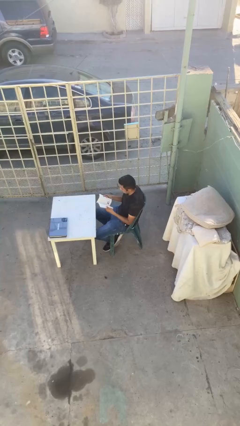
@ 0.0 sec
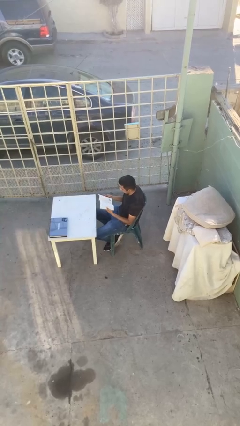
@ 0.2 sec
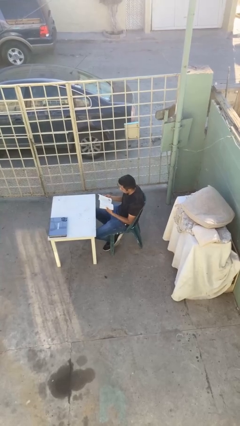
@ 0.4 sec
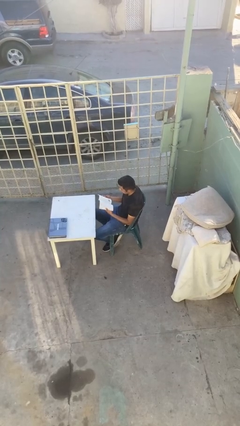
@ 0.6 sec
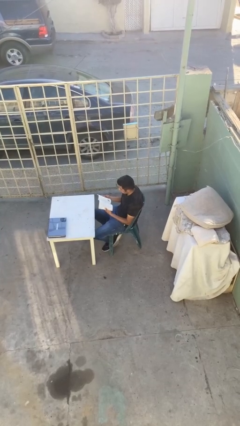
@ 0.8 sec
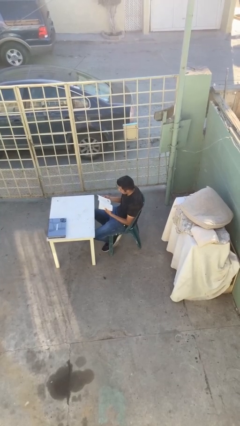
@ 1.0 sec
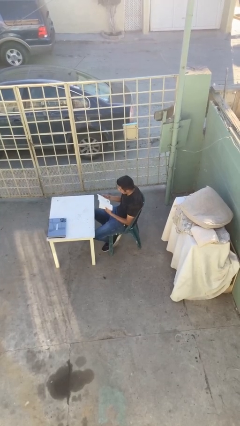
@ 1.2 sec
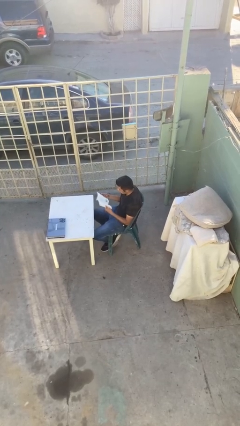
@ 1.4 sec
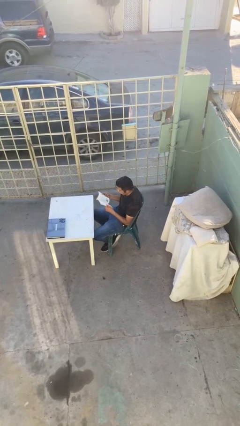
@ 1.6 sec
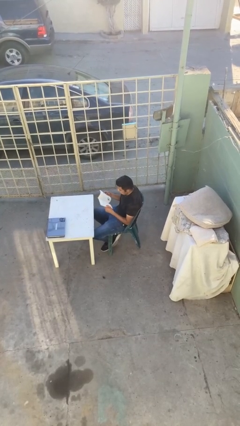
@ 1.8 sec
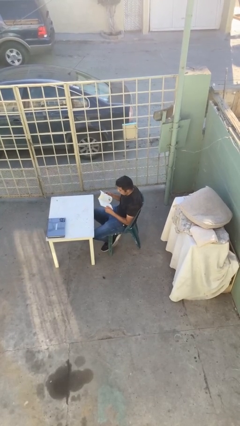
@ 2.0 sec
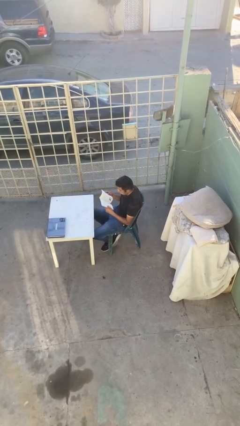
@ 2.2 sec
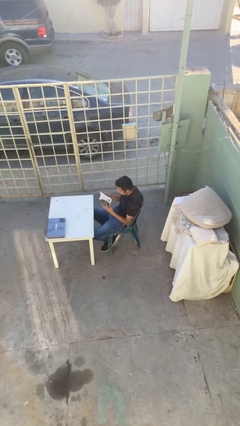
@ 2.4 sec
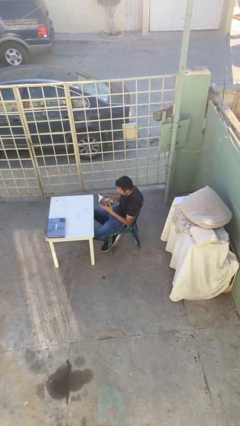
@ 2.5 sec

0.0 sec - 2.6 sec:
person reads document

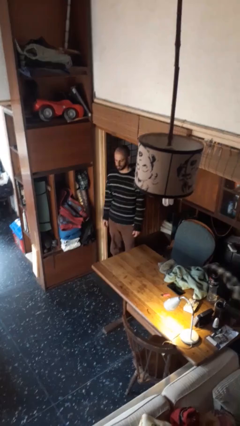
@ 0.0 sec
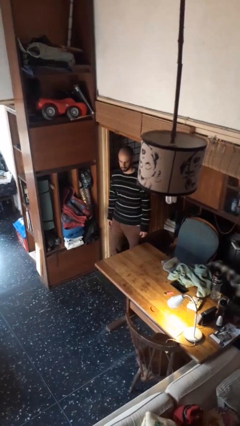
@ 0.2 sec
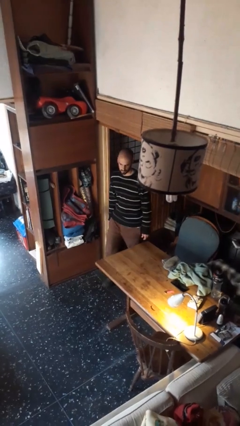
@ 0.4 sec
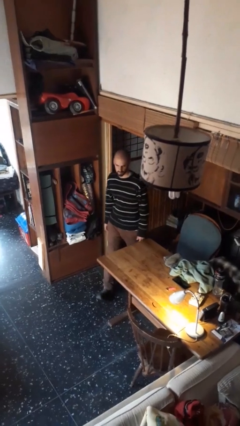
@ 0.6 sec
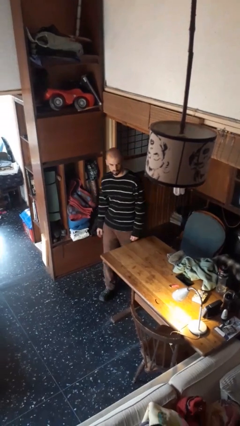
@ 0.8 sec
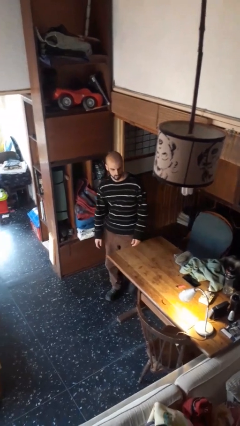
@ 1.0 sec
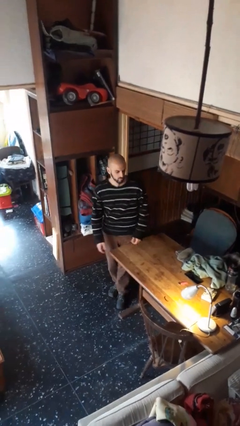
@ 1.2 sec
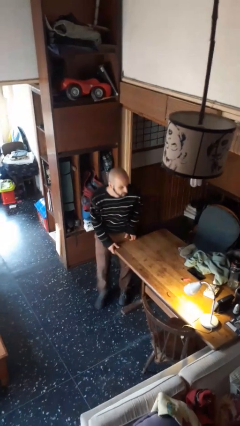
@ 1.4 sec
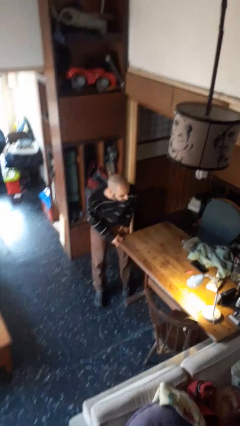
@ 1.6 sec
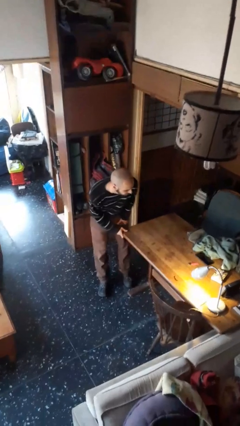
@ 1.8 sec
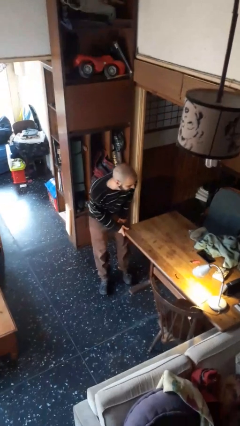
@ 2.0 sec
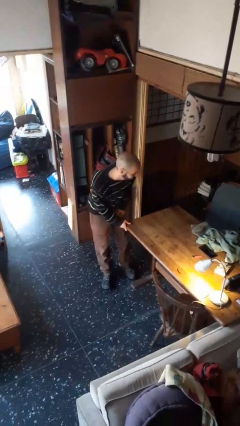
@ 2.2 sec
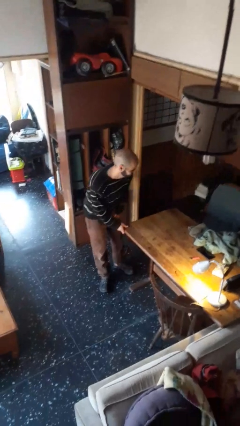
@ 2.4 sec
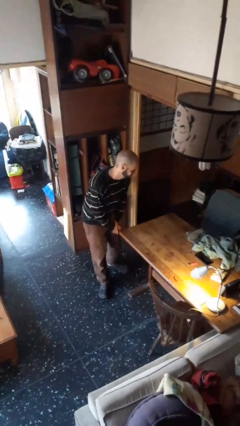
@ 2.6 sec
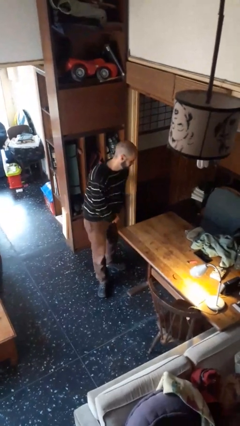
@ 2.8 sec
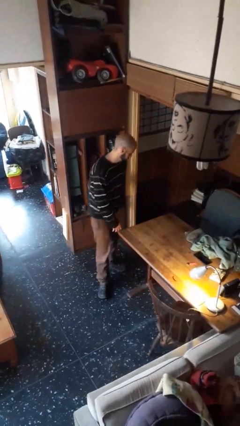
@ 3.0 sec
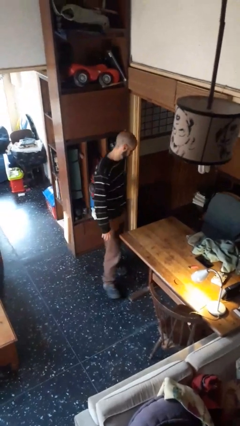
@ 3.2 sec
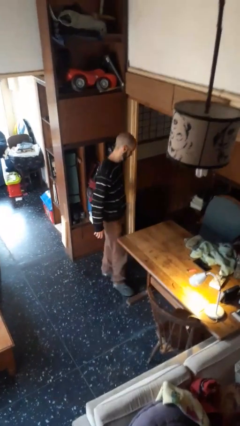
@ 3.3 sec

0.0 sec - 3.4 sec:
person bumps into table

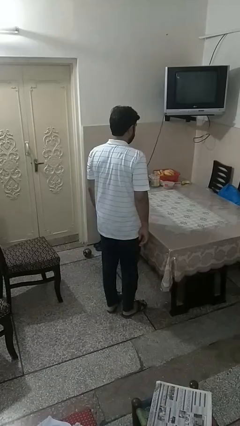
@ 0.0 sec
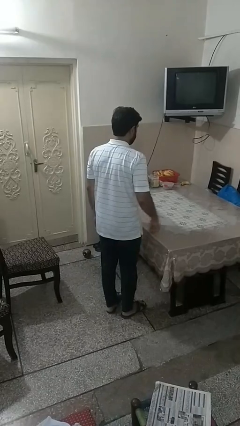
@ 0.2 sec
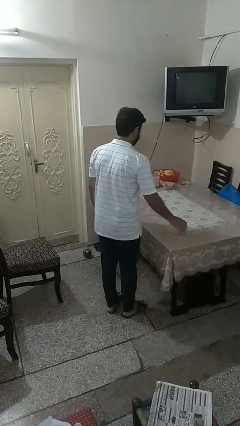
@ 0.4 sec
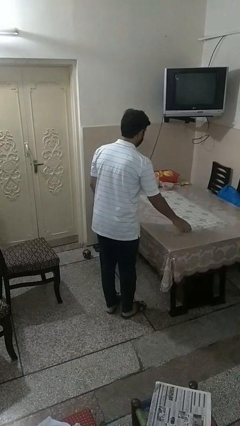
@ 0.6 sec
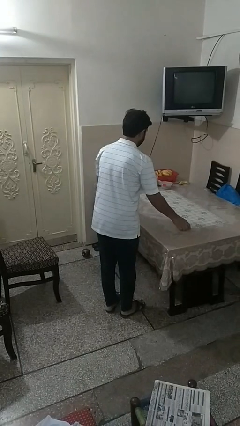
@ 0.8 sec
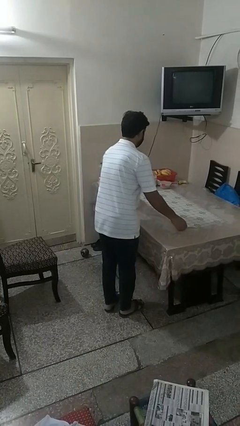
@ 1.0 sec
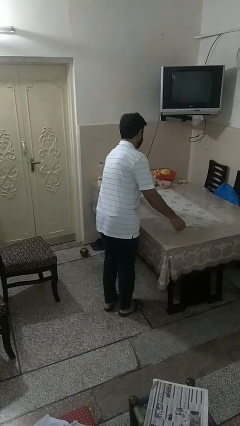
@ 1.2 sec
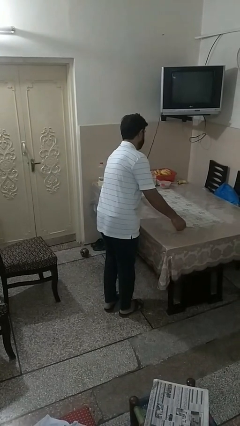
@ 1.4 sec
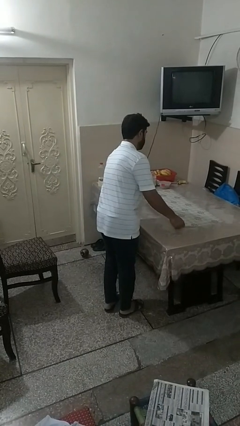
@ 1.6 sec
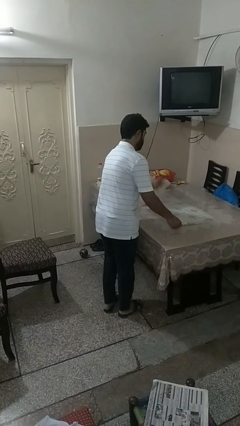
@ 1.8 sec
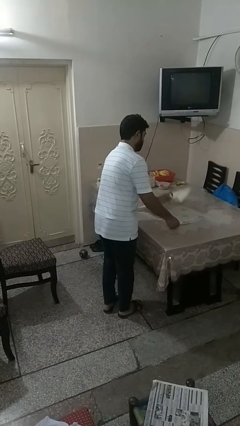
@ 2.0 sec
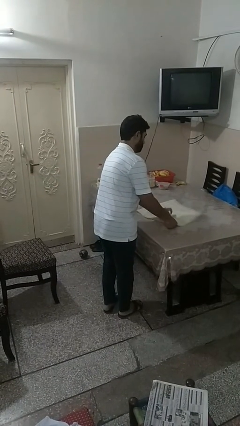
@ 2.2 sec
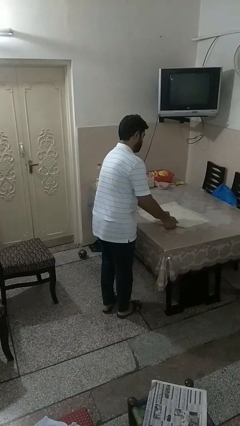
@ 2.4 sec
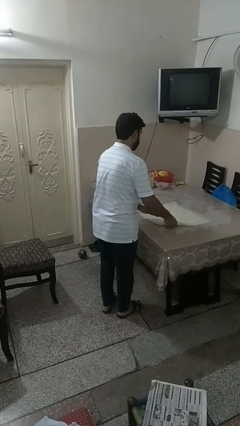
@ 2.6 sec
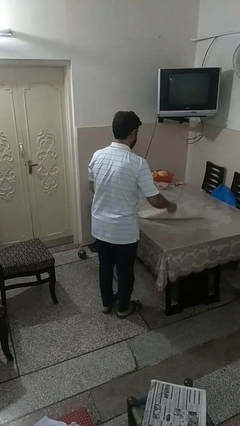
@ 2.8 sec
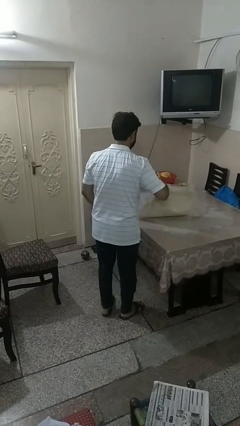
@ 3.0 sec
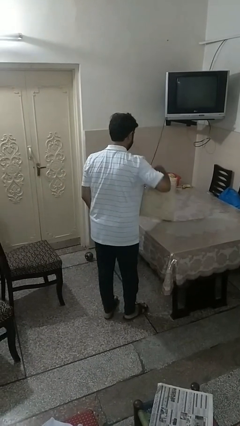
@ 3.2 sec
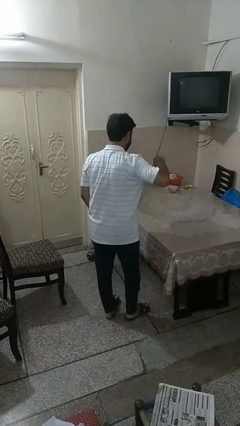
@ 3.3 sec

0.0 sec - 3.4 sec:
person folds tablecloth

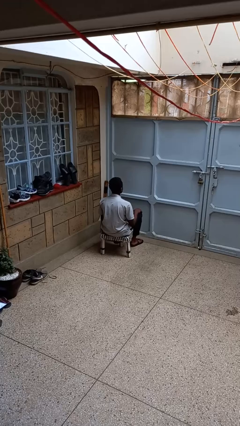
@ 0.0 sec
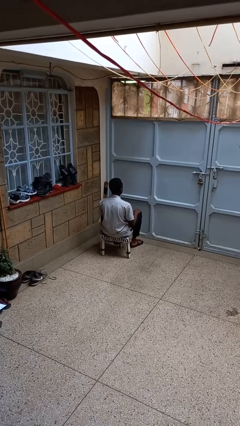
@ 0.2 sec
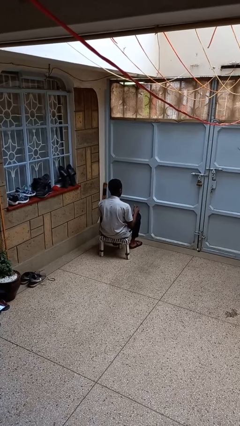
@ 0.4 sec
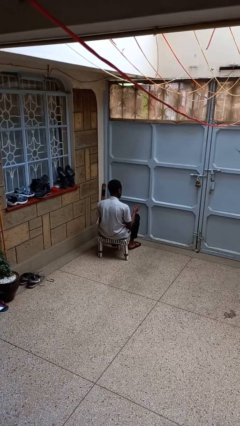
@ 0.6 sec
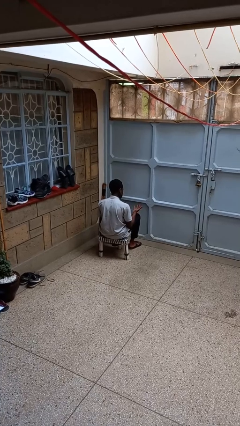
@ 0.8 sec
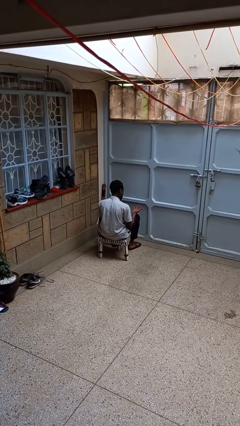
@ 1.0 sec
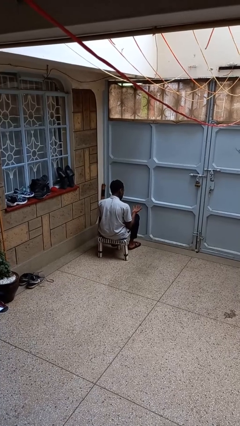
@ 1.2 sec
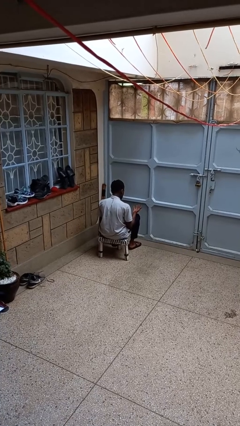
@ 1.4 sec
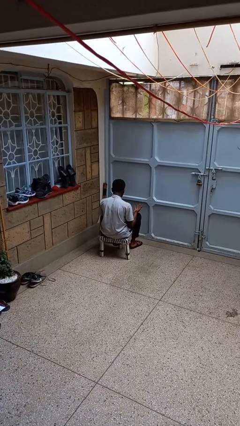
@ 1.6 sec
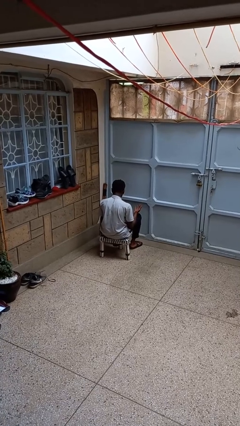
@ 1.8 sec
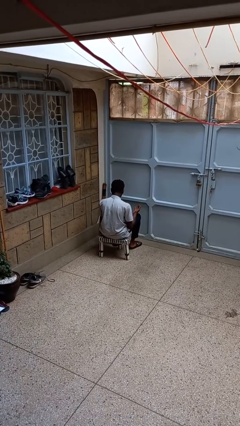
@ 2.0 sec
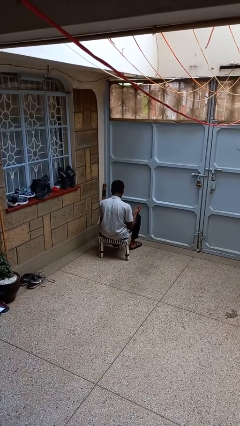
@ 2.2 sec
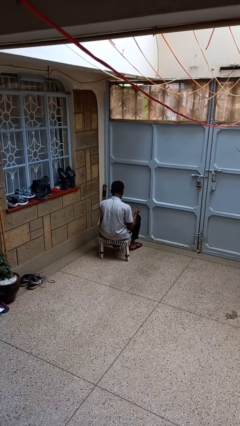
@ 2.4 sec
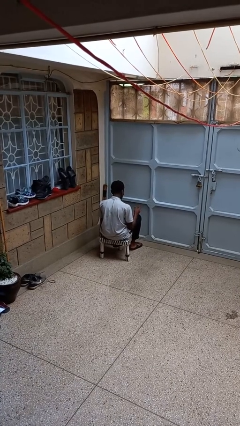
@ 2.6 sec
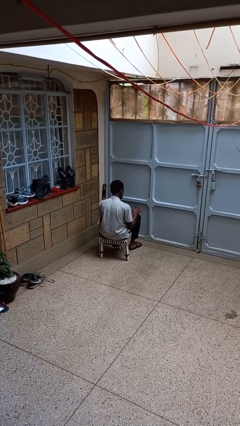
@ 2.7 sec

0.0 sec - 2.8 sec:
person looks at hands in lap

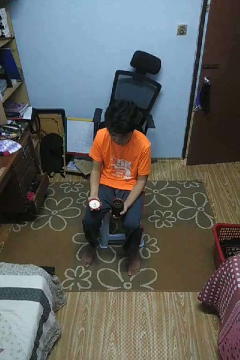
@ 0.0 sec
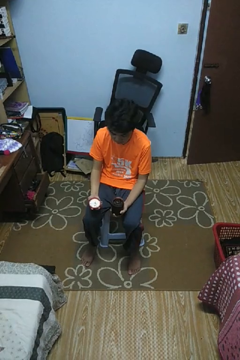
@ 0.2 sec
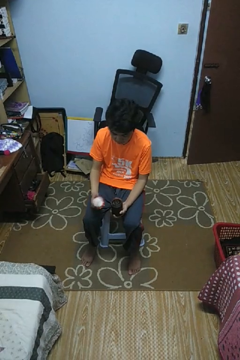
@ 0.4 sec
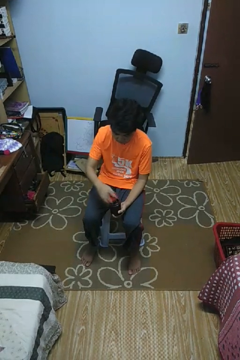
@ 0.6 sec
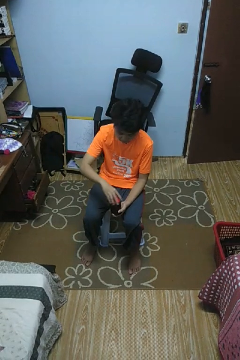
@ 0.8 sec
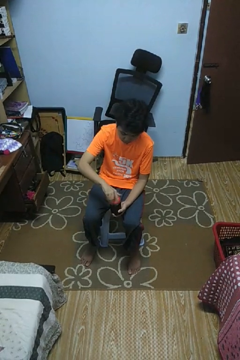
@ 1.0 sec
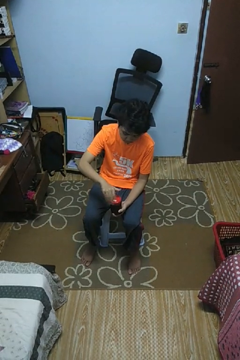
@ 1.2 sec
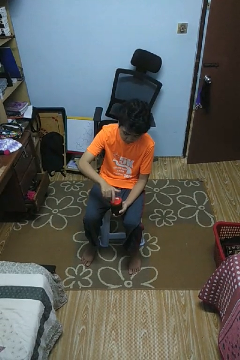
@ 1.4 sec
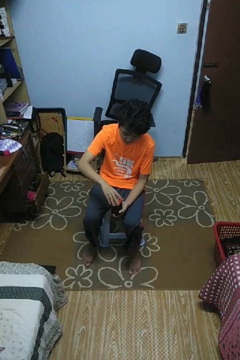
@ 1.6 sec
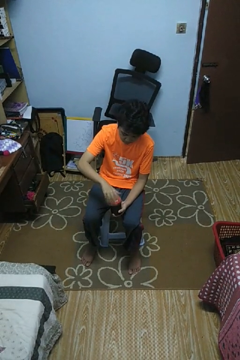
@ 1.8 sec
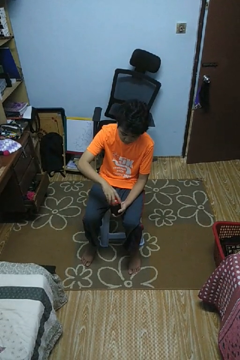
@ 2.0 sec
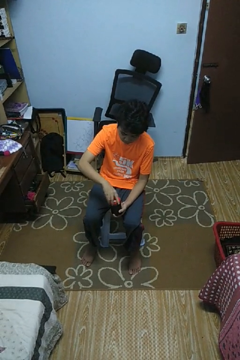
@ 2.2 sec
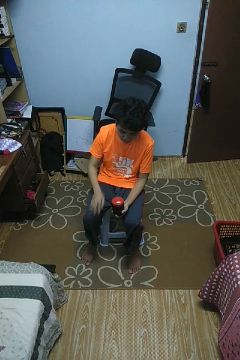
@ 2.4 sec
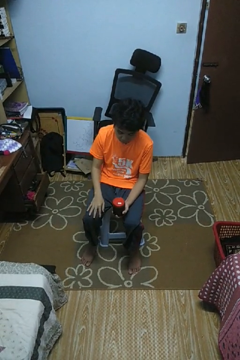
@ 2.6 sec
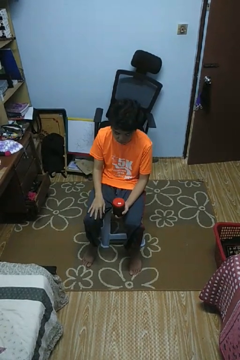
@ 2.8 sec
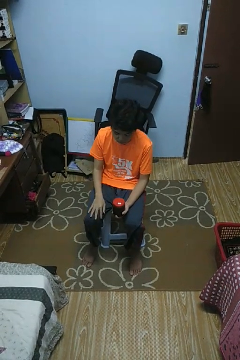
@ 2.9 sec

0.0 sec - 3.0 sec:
person closes jar

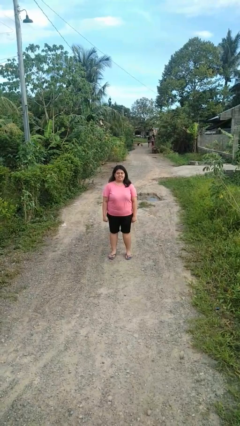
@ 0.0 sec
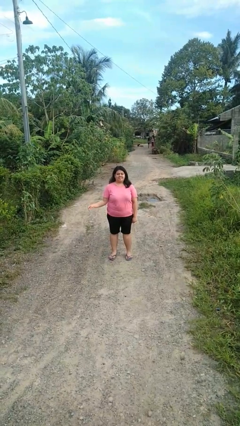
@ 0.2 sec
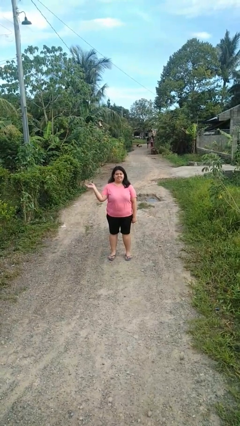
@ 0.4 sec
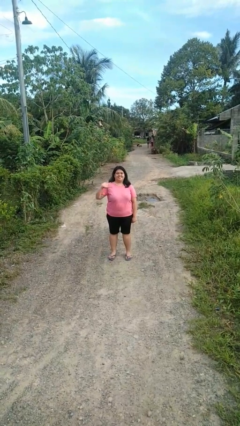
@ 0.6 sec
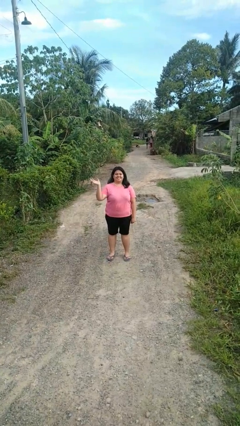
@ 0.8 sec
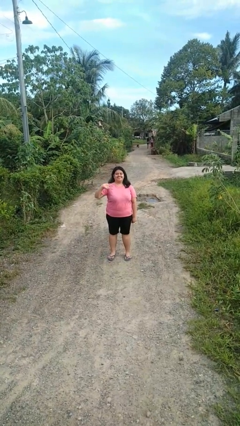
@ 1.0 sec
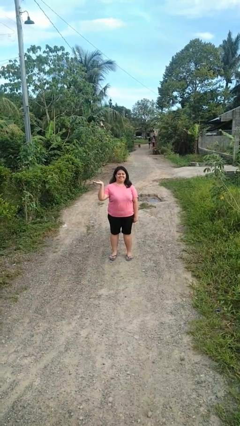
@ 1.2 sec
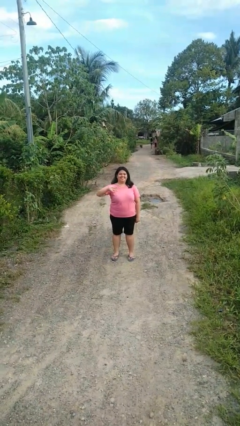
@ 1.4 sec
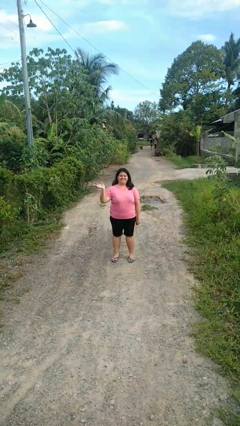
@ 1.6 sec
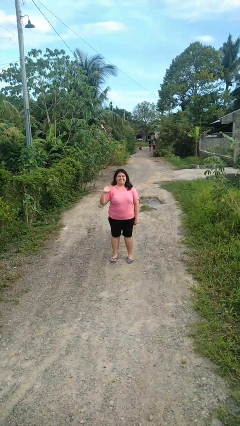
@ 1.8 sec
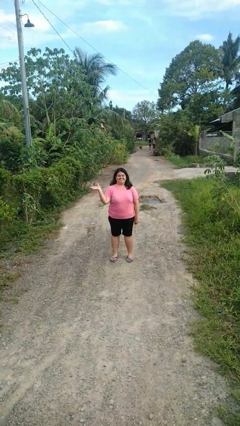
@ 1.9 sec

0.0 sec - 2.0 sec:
person waves at person

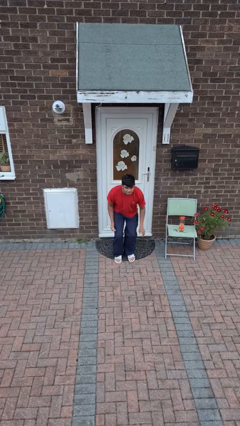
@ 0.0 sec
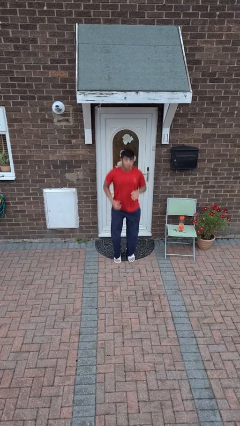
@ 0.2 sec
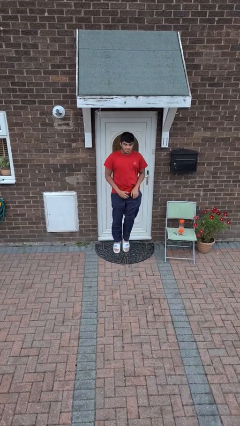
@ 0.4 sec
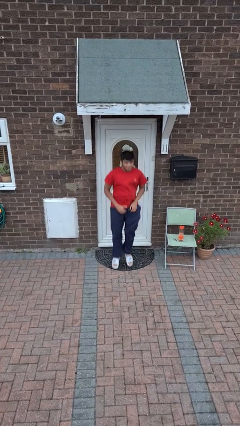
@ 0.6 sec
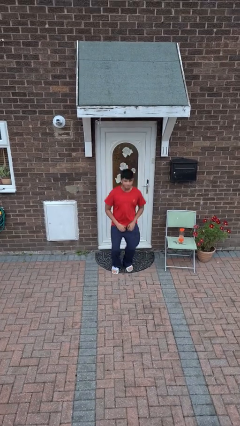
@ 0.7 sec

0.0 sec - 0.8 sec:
person jumps
